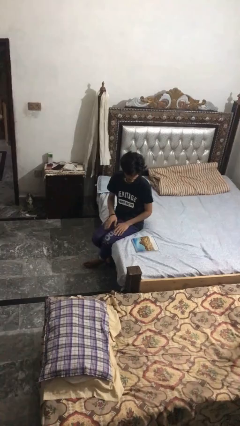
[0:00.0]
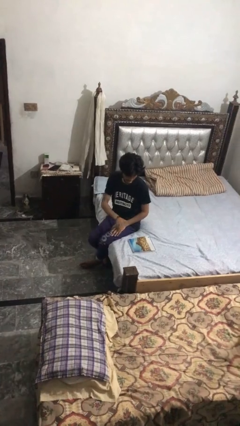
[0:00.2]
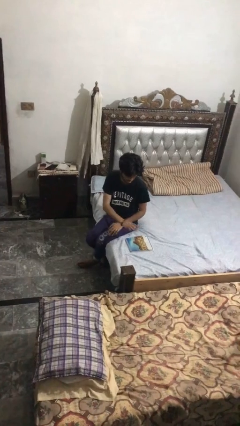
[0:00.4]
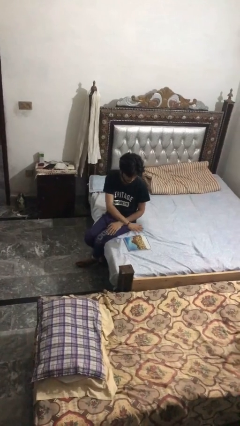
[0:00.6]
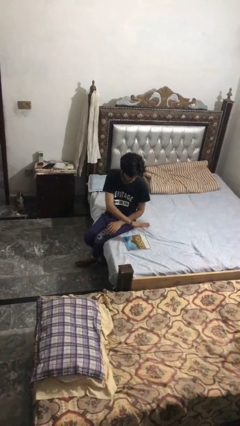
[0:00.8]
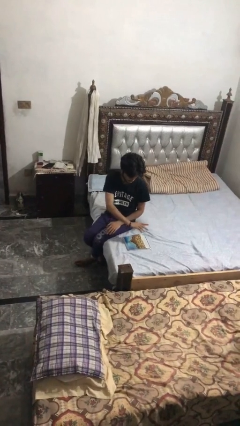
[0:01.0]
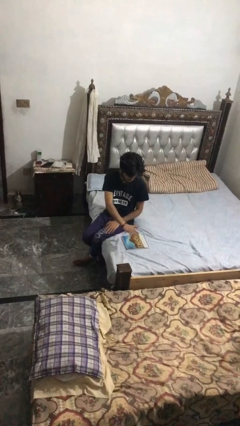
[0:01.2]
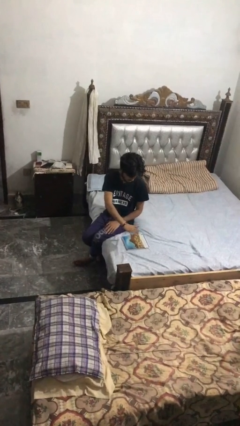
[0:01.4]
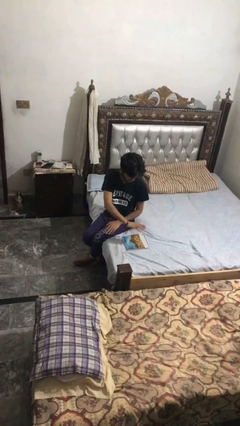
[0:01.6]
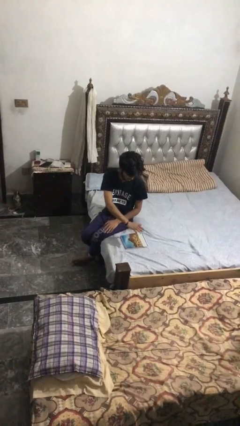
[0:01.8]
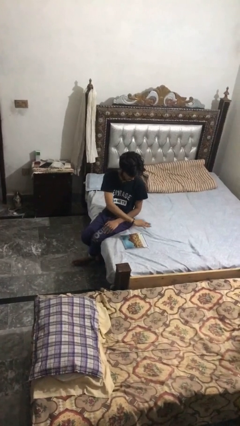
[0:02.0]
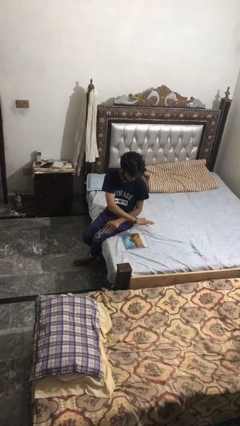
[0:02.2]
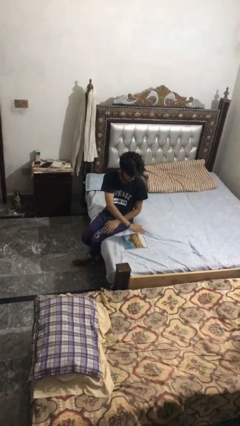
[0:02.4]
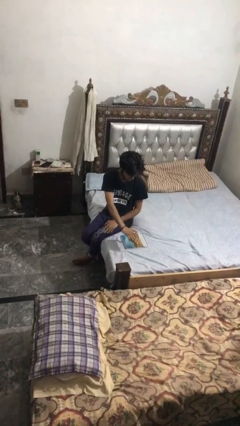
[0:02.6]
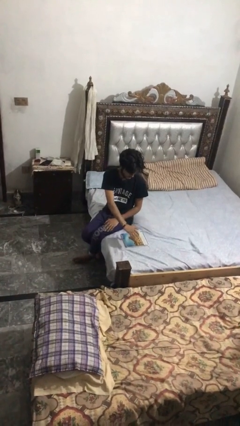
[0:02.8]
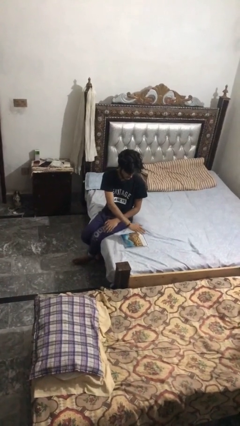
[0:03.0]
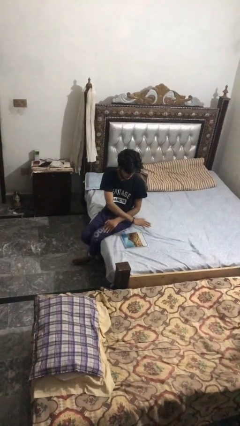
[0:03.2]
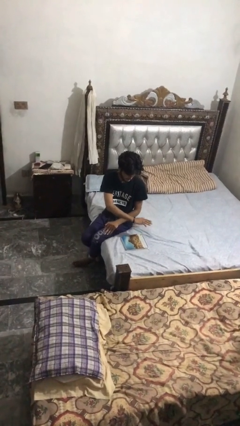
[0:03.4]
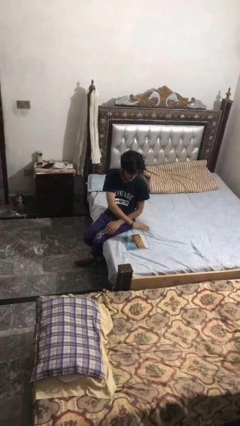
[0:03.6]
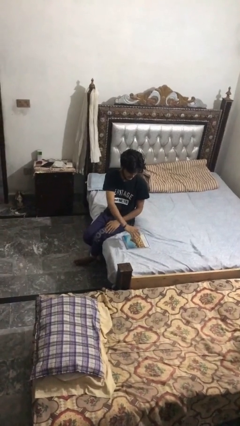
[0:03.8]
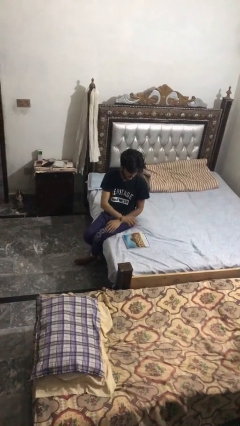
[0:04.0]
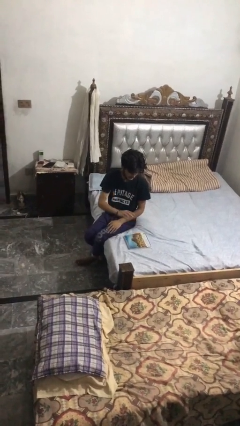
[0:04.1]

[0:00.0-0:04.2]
person waves hand over object

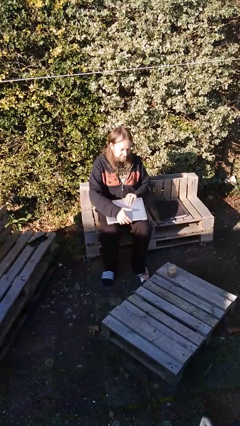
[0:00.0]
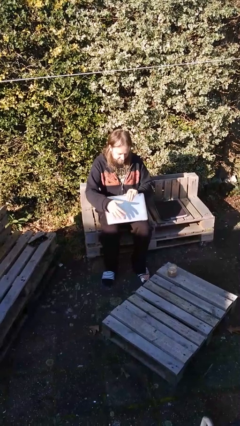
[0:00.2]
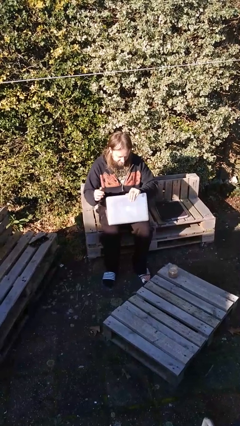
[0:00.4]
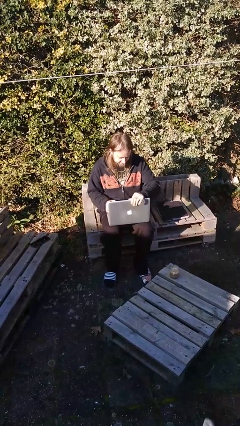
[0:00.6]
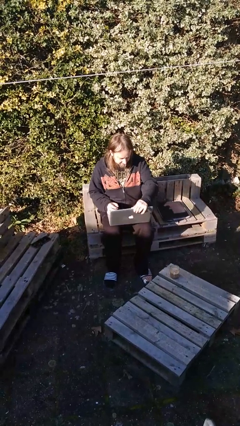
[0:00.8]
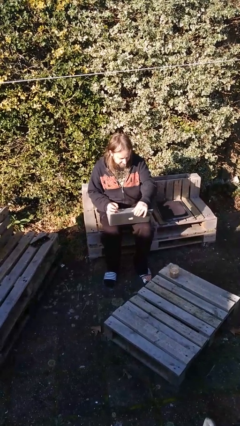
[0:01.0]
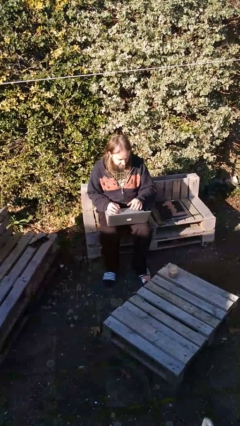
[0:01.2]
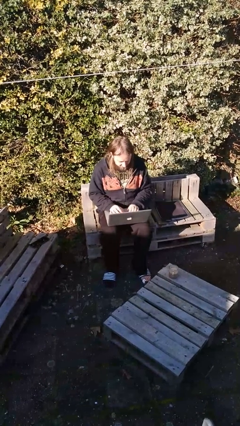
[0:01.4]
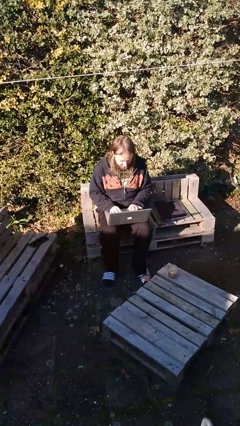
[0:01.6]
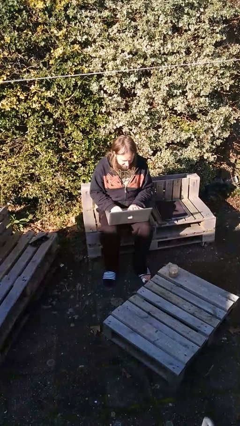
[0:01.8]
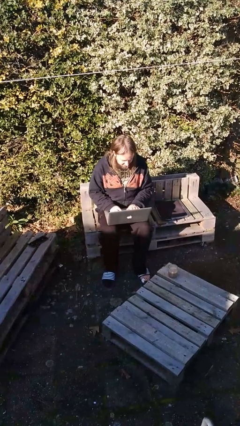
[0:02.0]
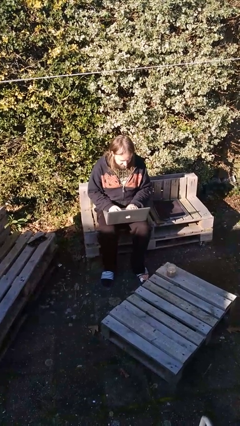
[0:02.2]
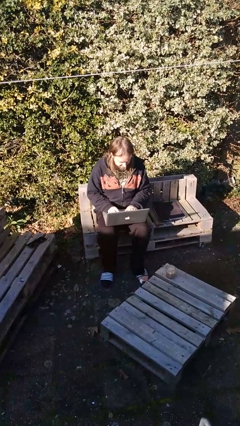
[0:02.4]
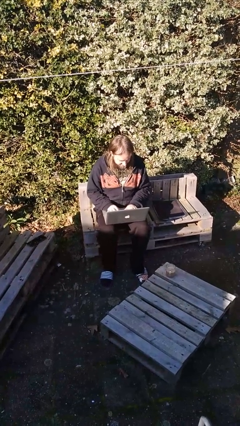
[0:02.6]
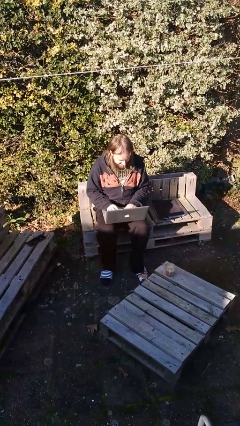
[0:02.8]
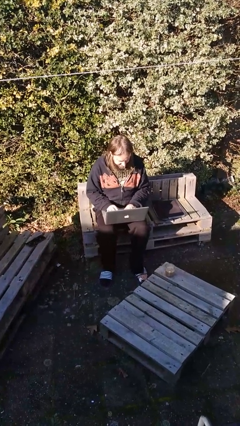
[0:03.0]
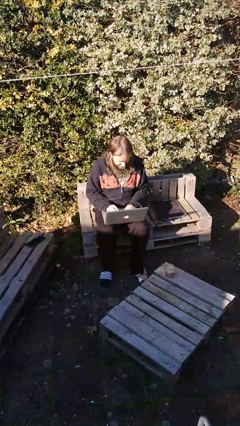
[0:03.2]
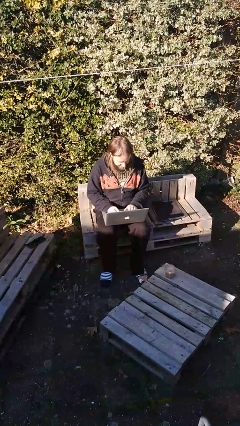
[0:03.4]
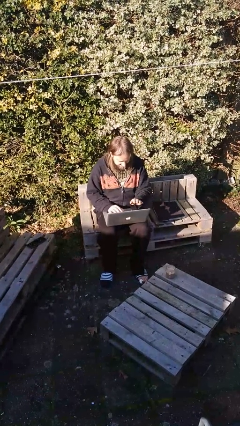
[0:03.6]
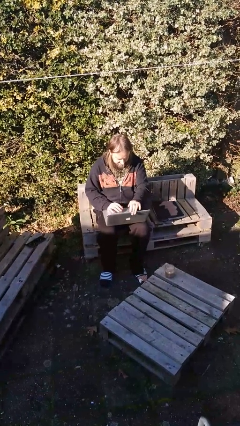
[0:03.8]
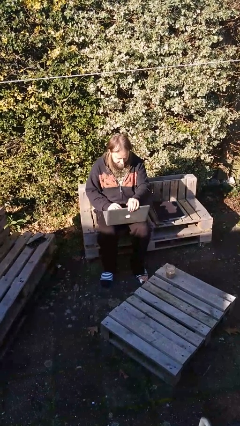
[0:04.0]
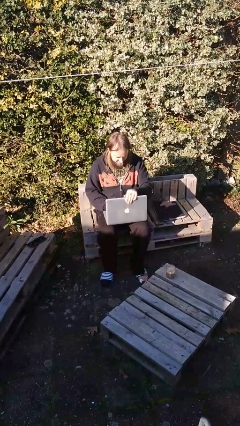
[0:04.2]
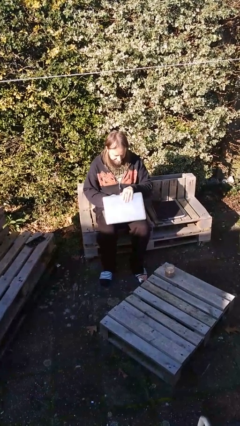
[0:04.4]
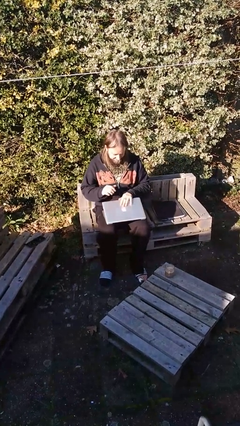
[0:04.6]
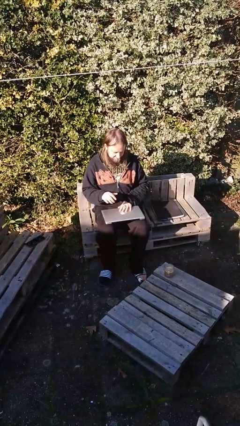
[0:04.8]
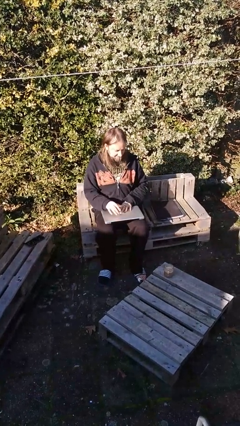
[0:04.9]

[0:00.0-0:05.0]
person interacts with laptop

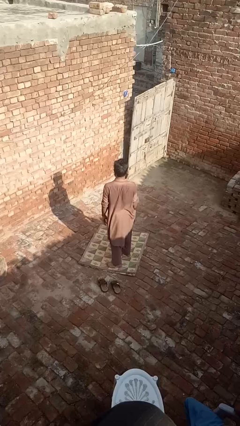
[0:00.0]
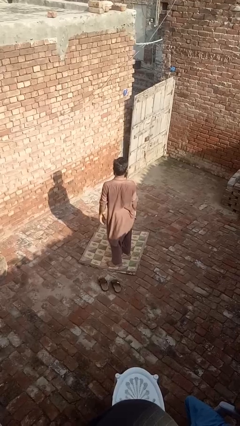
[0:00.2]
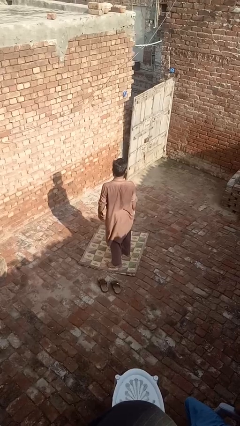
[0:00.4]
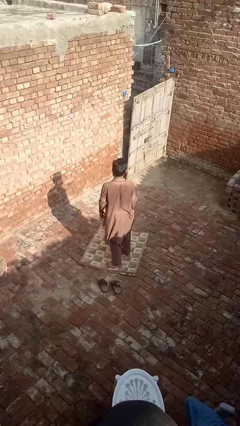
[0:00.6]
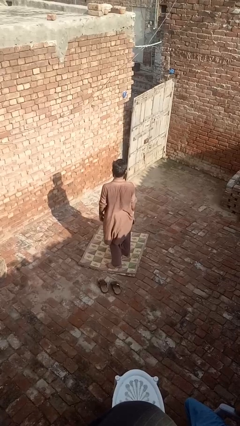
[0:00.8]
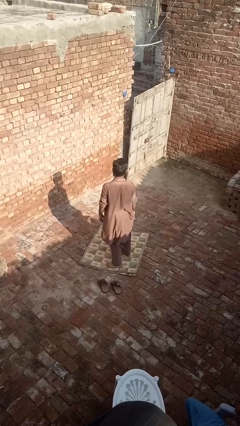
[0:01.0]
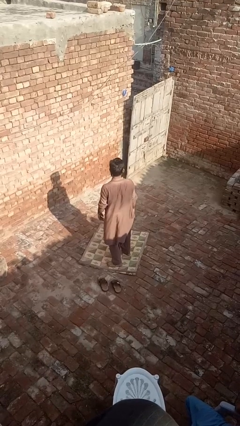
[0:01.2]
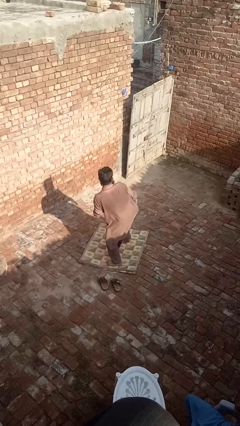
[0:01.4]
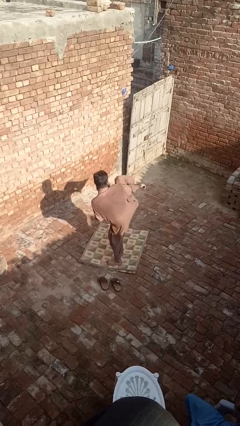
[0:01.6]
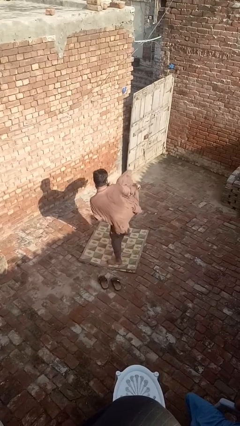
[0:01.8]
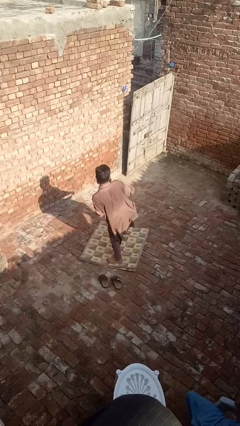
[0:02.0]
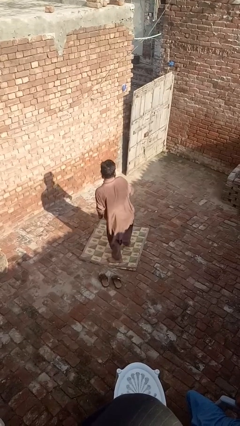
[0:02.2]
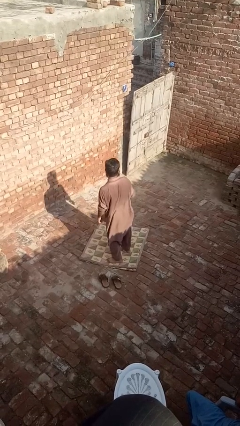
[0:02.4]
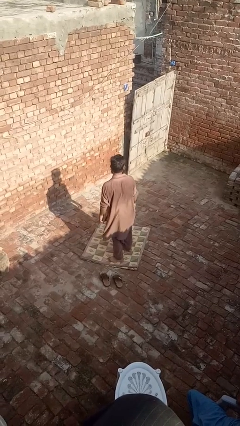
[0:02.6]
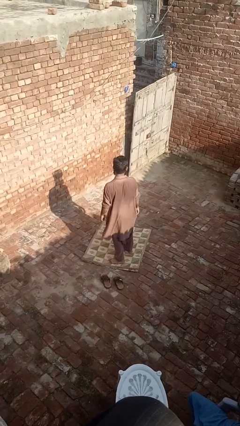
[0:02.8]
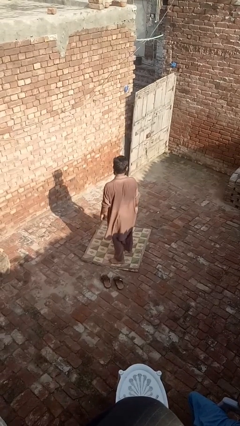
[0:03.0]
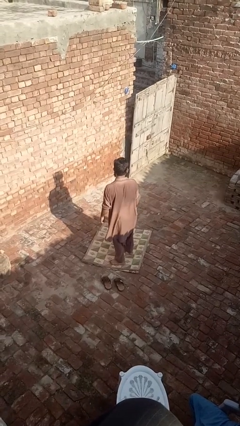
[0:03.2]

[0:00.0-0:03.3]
person karate kicks

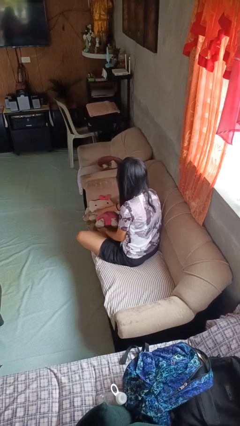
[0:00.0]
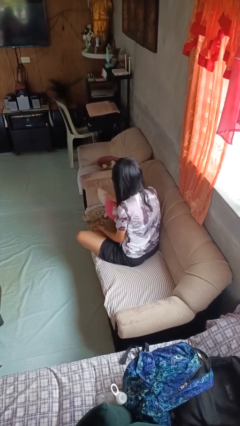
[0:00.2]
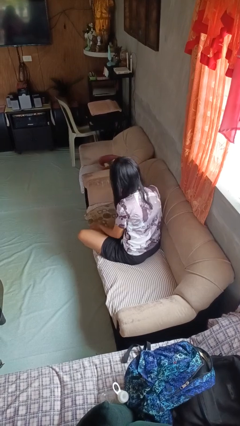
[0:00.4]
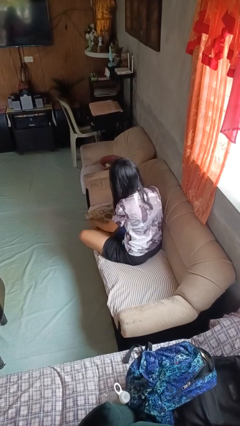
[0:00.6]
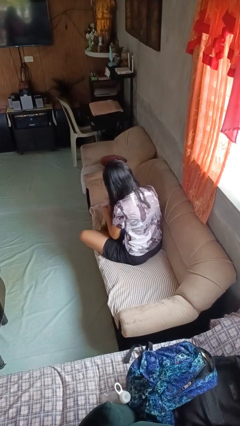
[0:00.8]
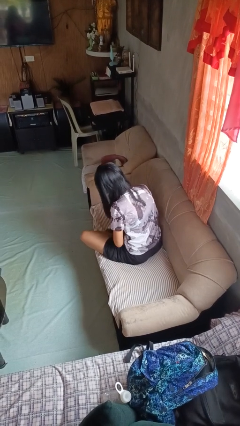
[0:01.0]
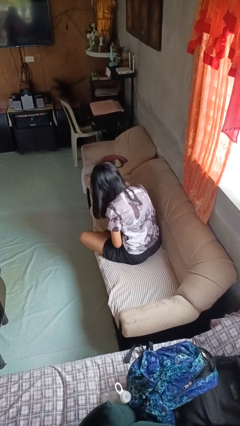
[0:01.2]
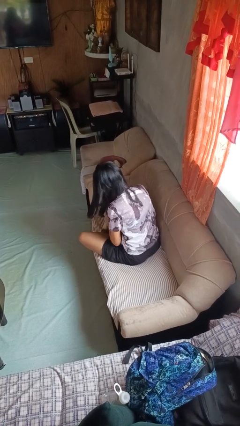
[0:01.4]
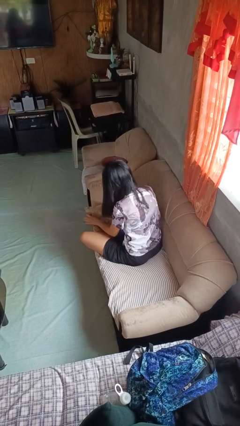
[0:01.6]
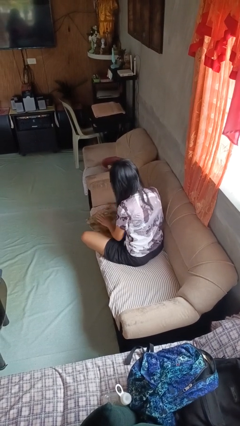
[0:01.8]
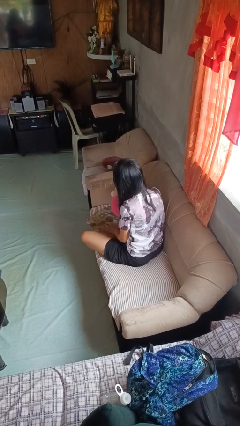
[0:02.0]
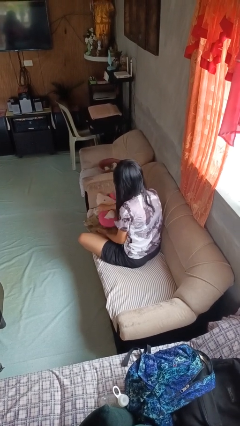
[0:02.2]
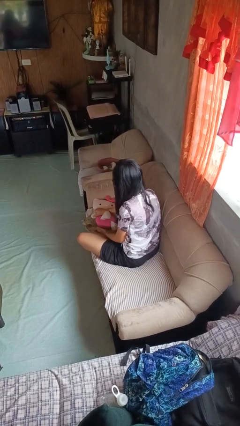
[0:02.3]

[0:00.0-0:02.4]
person searches in couch

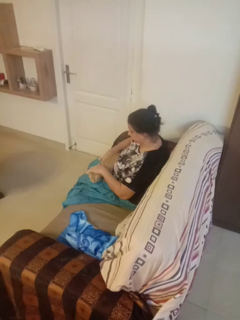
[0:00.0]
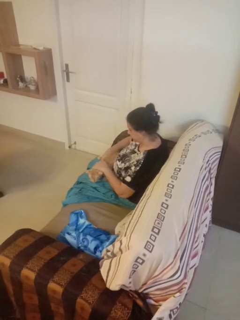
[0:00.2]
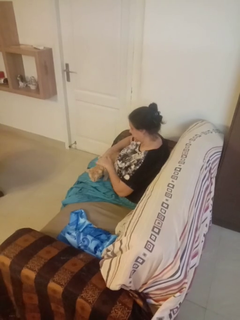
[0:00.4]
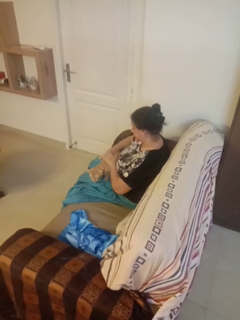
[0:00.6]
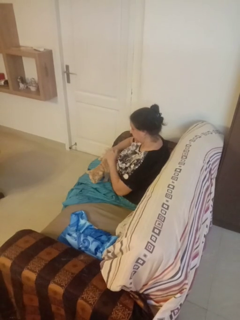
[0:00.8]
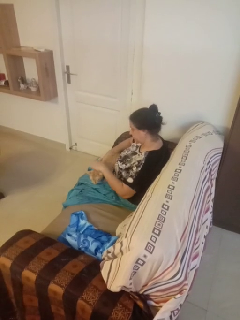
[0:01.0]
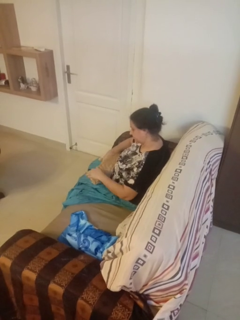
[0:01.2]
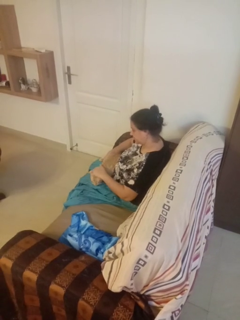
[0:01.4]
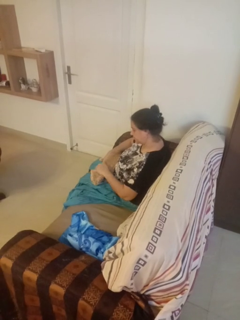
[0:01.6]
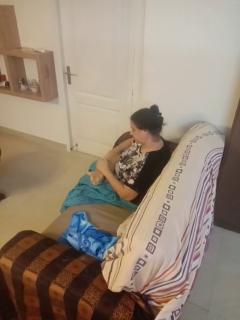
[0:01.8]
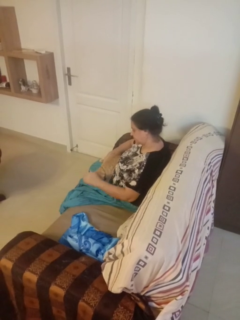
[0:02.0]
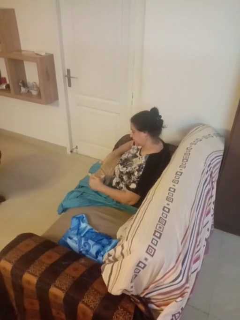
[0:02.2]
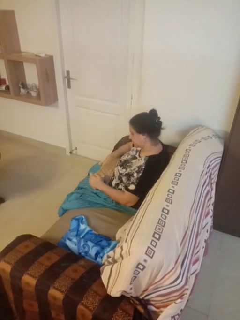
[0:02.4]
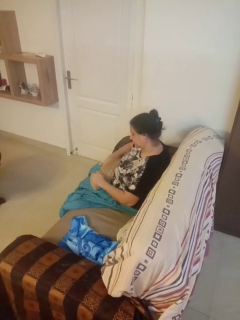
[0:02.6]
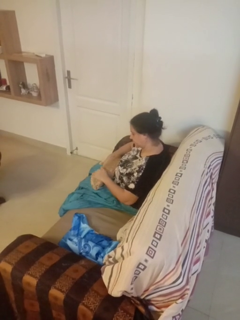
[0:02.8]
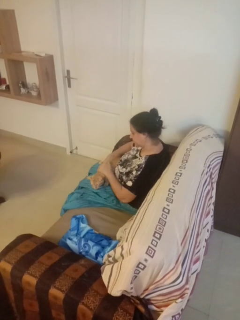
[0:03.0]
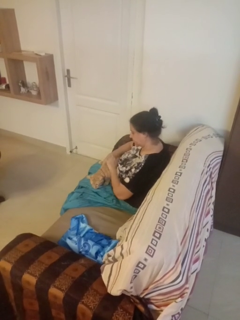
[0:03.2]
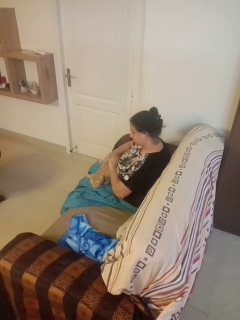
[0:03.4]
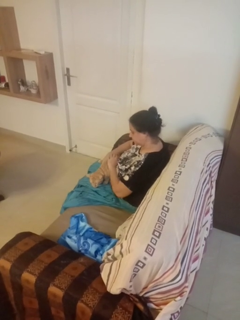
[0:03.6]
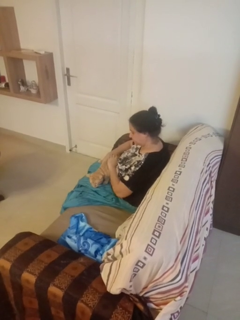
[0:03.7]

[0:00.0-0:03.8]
person pets cat

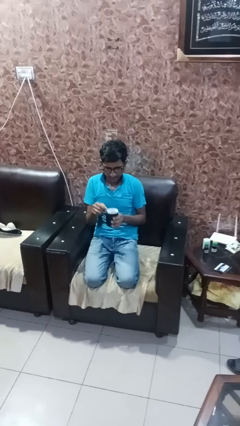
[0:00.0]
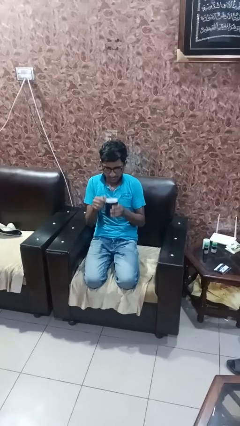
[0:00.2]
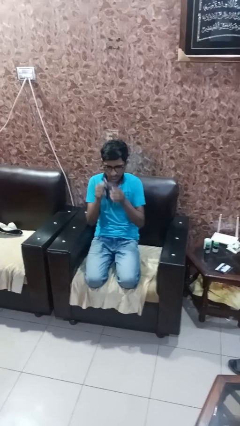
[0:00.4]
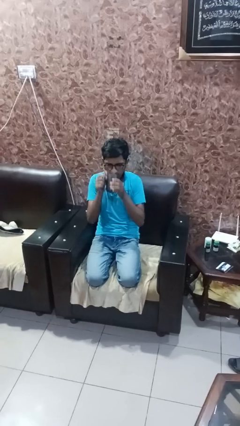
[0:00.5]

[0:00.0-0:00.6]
person stirs mug
